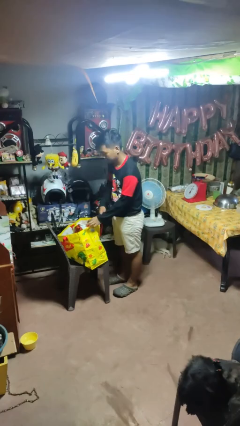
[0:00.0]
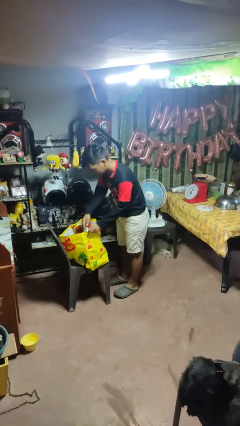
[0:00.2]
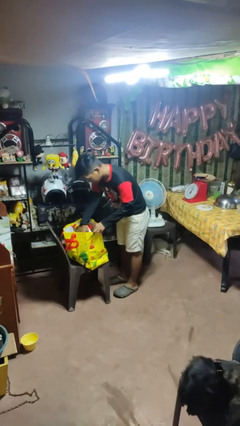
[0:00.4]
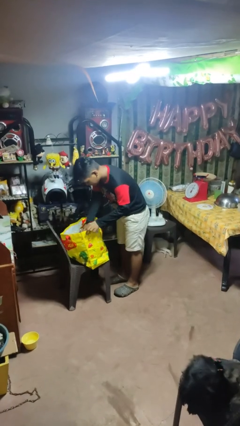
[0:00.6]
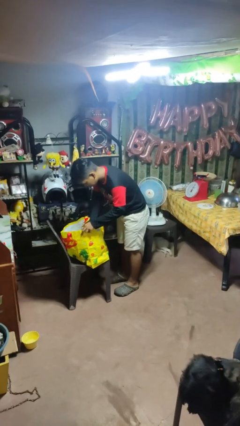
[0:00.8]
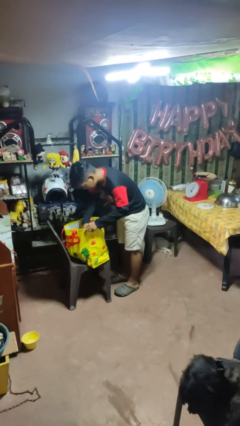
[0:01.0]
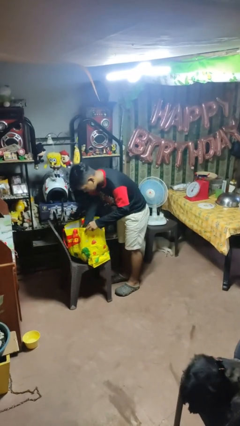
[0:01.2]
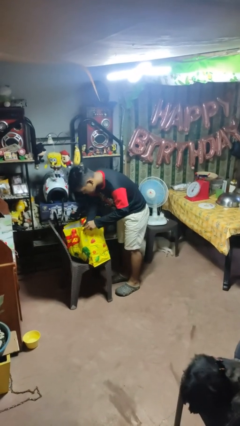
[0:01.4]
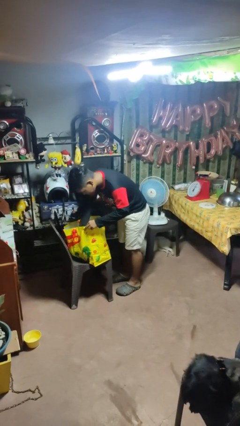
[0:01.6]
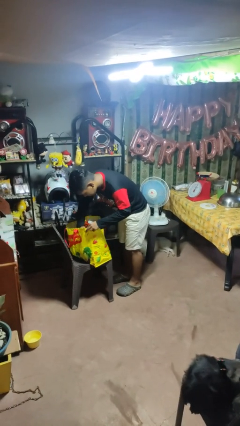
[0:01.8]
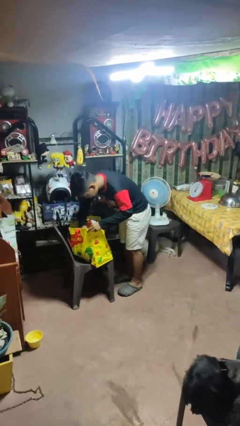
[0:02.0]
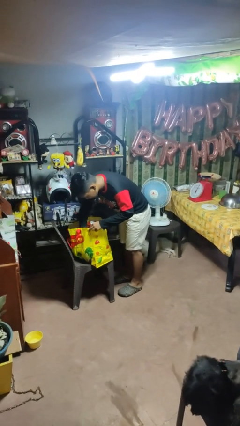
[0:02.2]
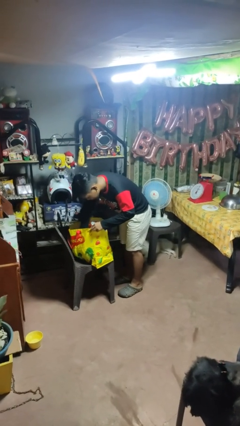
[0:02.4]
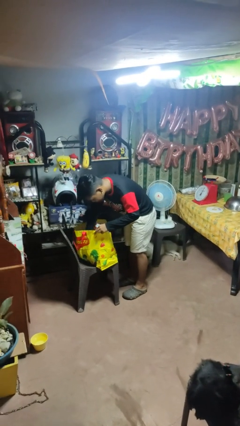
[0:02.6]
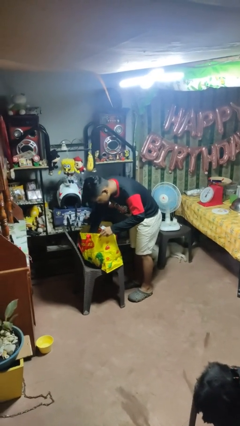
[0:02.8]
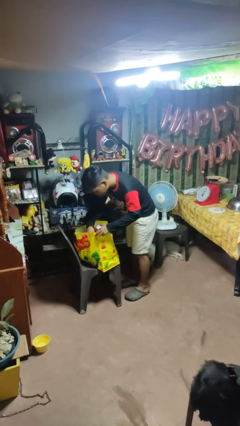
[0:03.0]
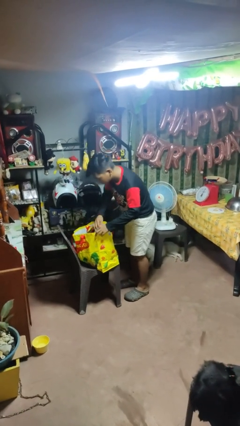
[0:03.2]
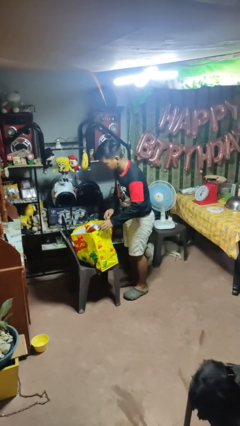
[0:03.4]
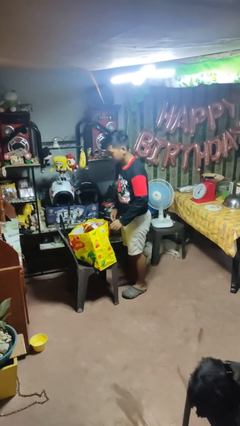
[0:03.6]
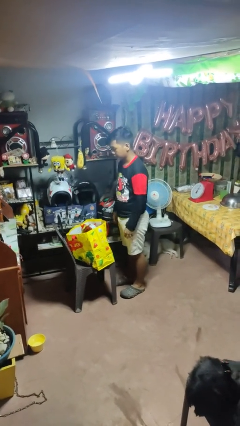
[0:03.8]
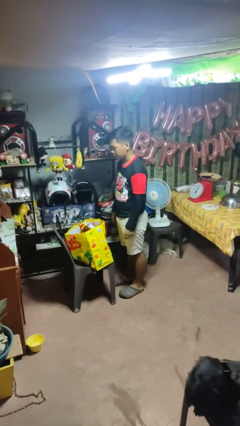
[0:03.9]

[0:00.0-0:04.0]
person searches in bag

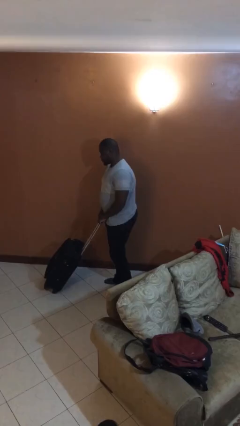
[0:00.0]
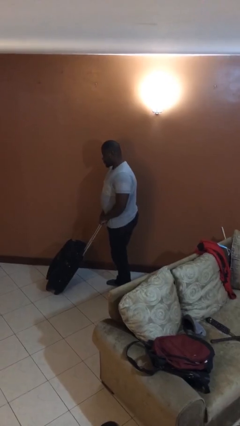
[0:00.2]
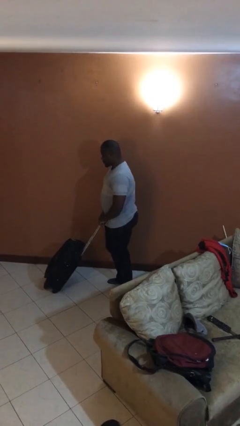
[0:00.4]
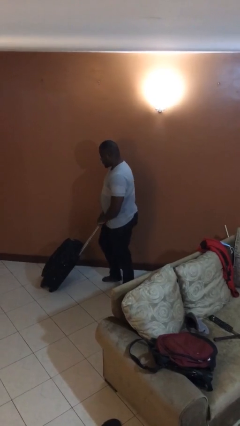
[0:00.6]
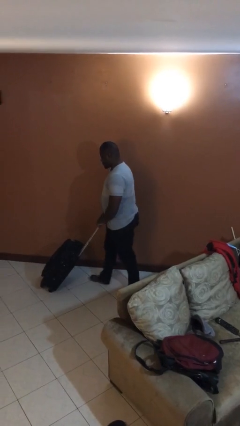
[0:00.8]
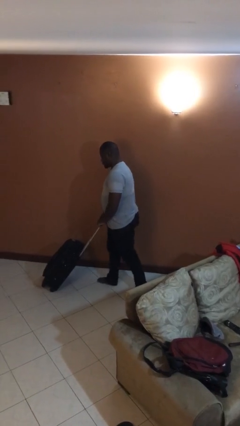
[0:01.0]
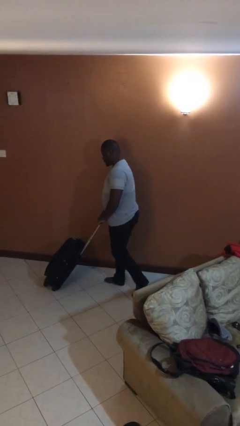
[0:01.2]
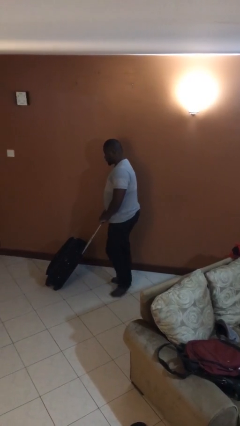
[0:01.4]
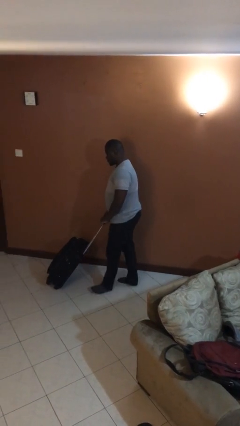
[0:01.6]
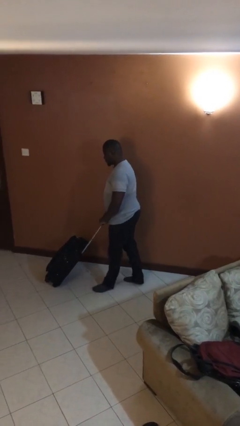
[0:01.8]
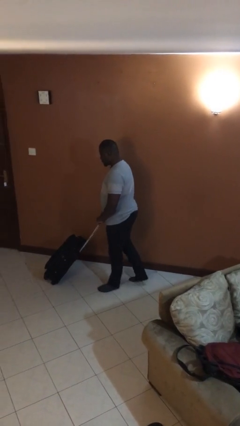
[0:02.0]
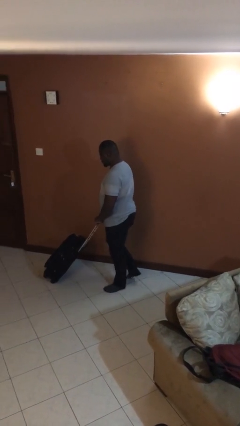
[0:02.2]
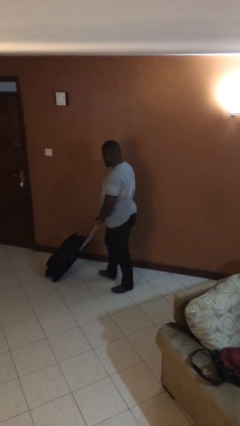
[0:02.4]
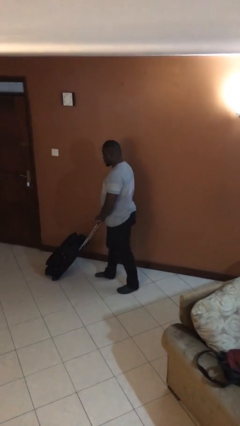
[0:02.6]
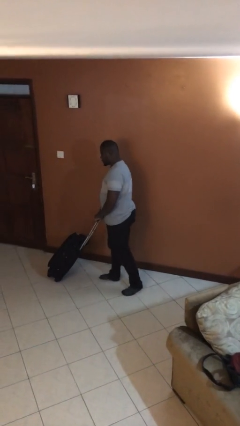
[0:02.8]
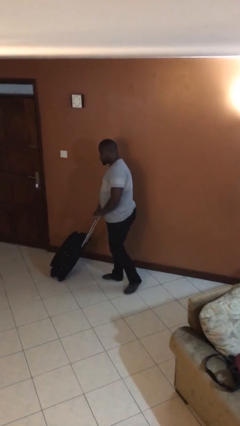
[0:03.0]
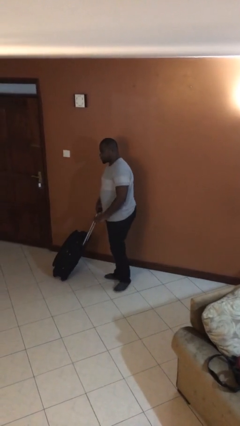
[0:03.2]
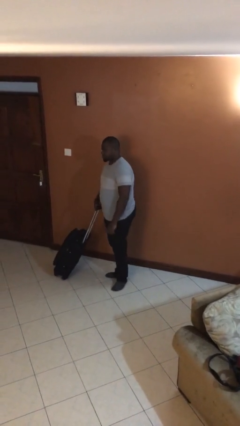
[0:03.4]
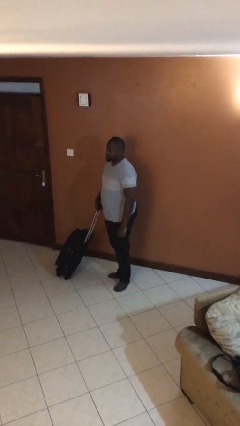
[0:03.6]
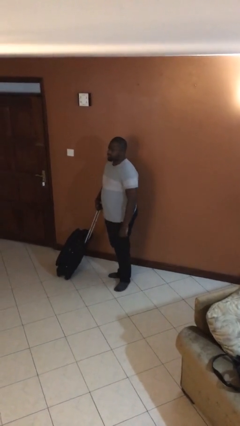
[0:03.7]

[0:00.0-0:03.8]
person pushes wheeled cart

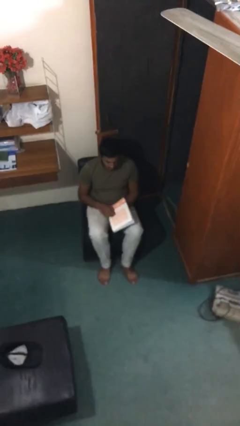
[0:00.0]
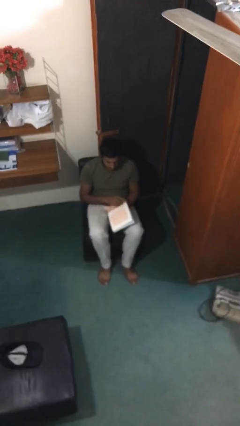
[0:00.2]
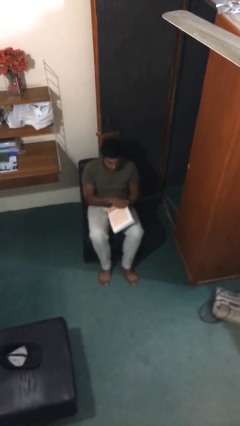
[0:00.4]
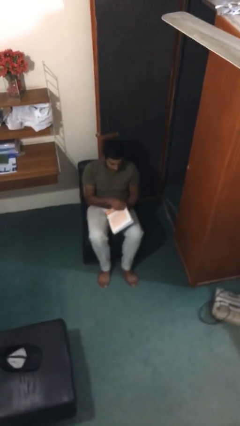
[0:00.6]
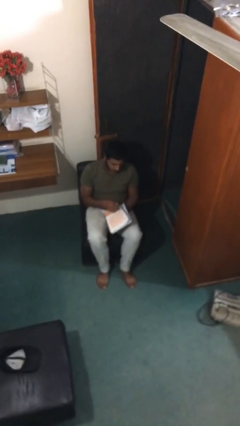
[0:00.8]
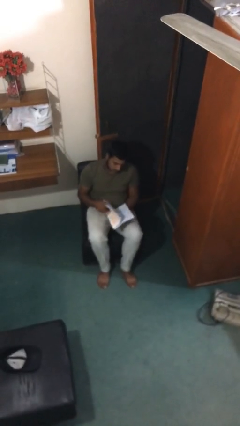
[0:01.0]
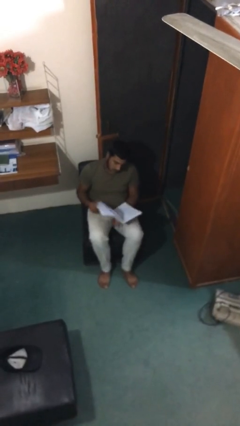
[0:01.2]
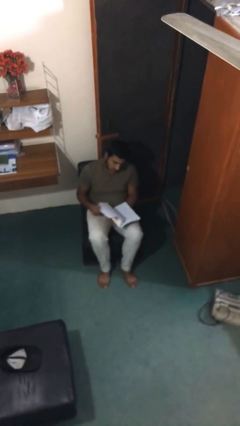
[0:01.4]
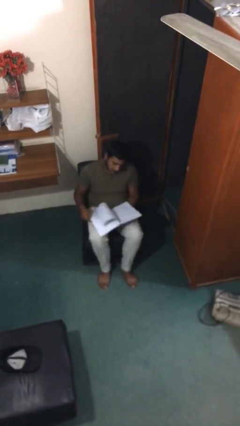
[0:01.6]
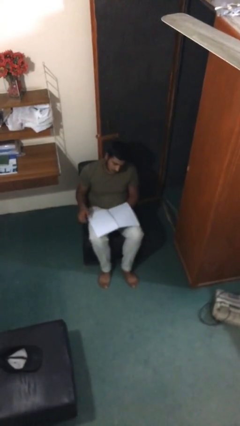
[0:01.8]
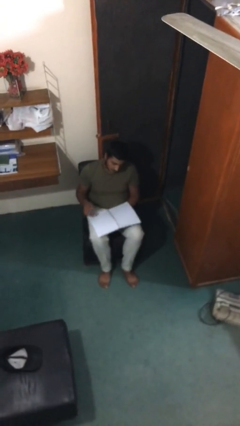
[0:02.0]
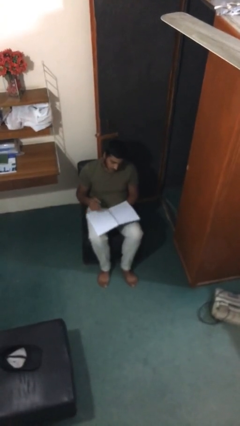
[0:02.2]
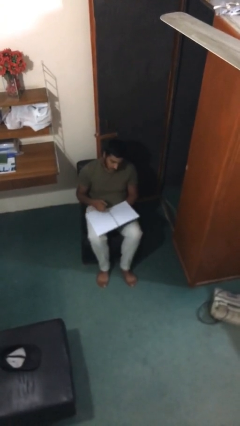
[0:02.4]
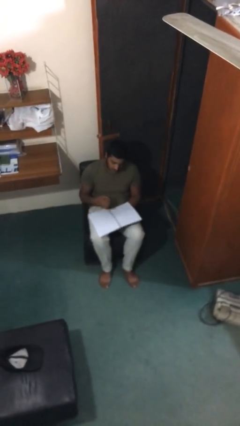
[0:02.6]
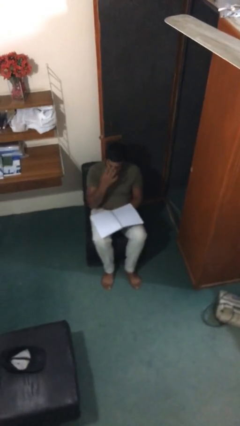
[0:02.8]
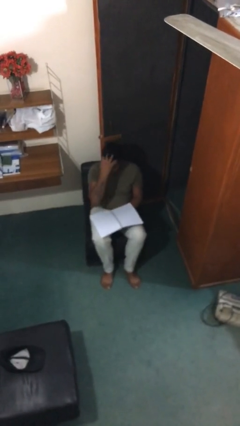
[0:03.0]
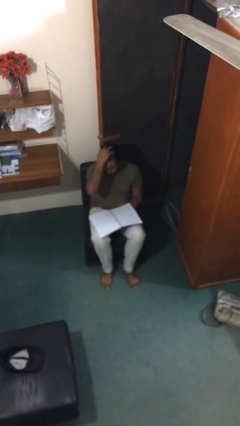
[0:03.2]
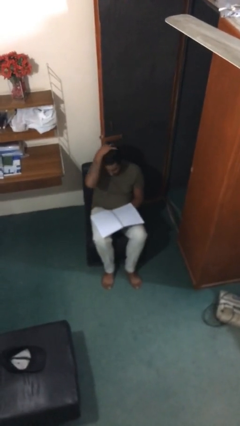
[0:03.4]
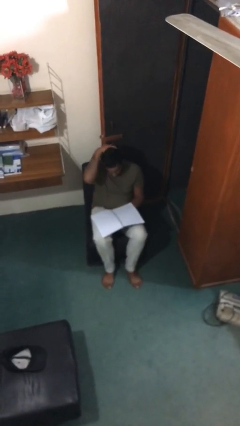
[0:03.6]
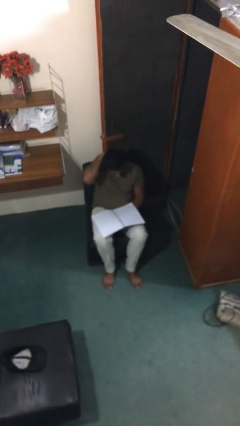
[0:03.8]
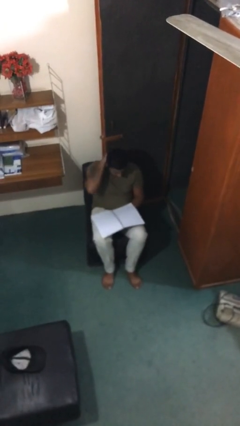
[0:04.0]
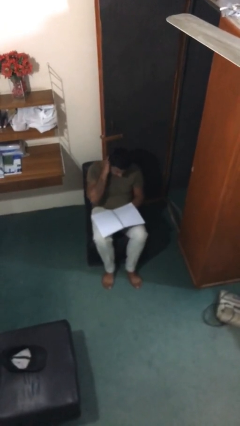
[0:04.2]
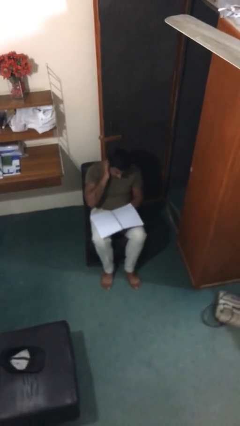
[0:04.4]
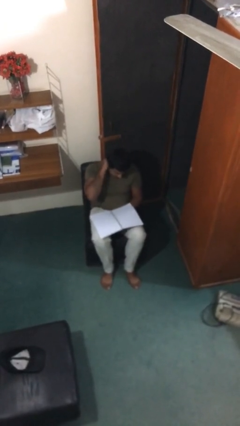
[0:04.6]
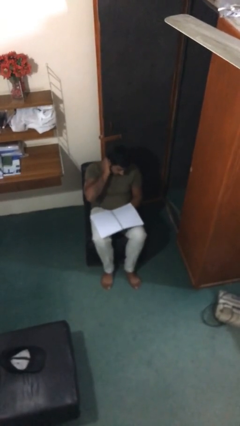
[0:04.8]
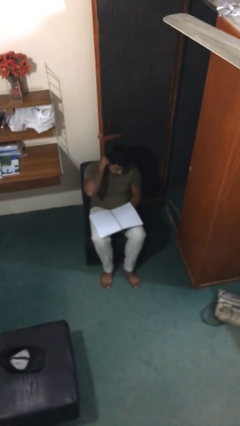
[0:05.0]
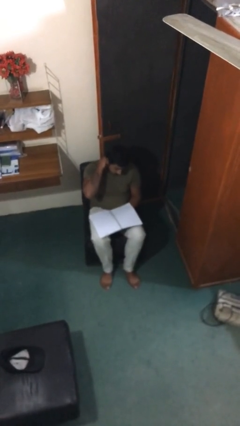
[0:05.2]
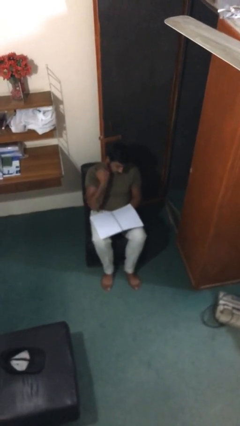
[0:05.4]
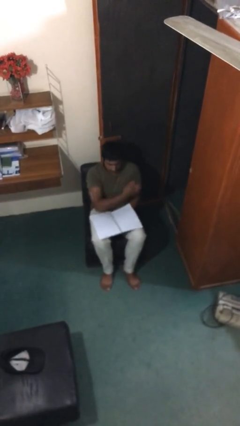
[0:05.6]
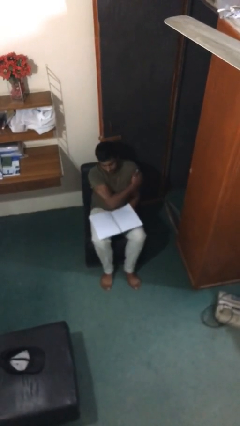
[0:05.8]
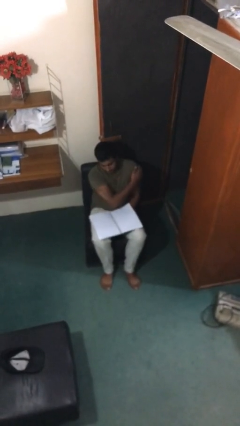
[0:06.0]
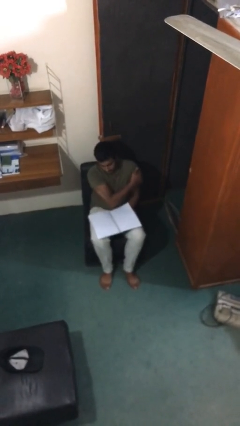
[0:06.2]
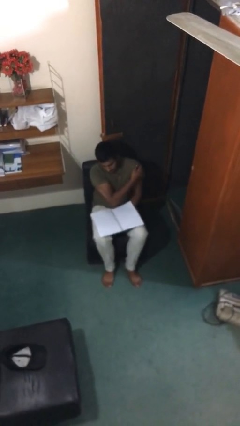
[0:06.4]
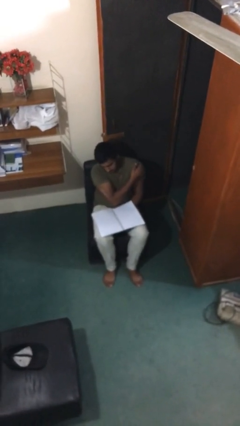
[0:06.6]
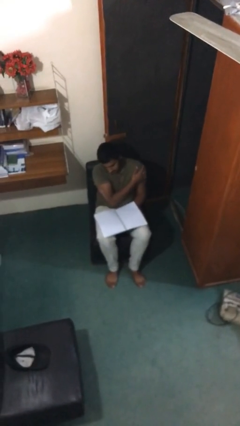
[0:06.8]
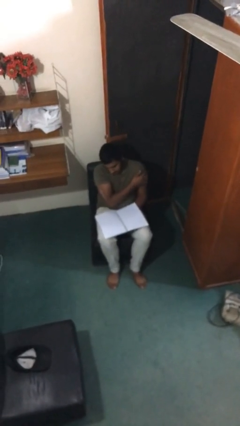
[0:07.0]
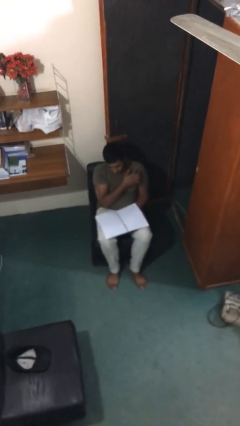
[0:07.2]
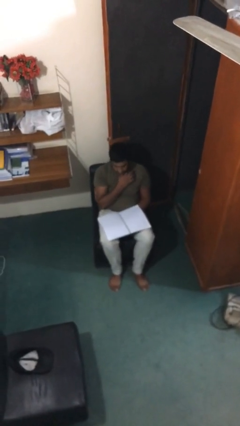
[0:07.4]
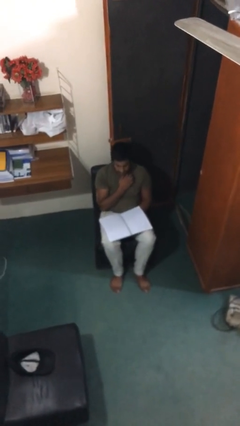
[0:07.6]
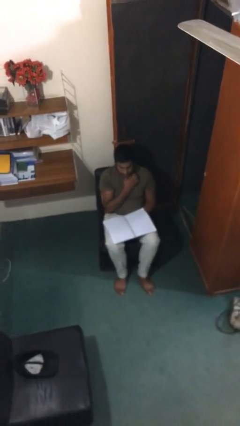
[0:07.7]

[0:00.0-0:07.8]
person reads document

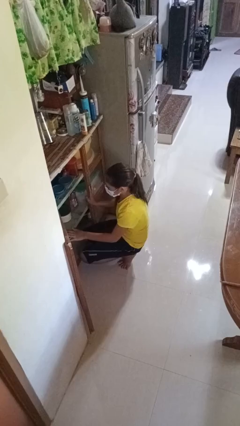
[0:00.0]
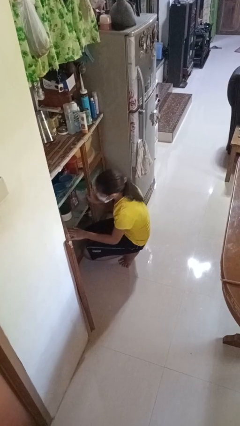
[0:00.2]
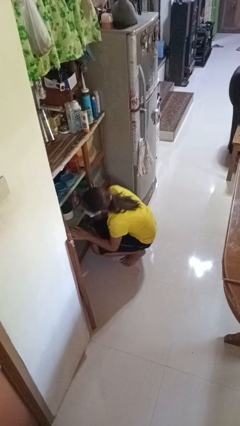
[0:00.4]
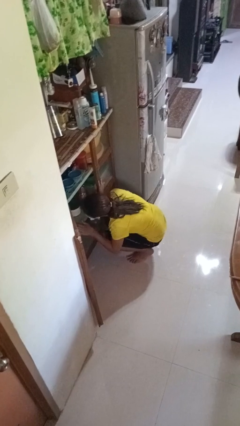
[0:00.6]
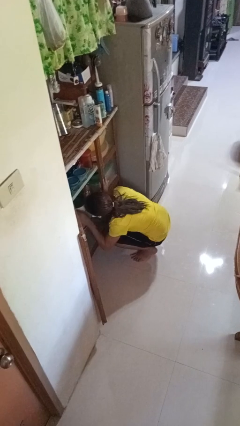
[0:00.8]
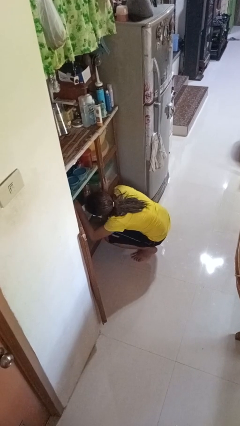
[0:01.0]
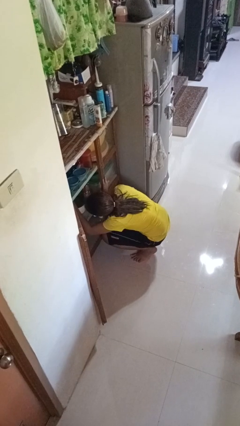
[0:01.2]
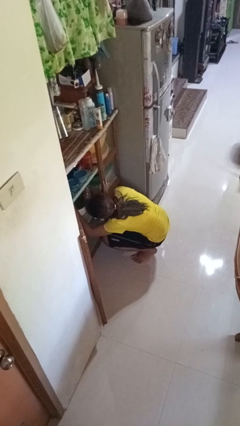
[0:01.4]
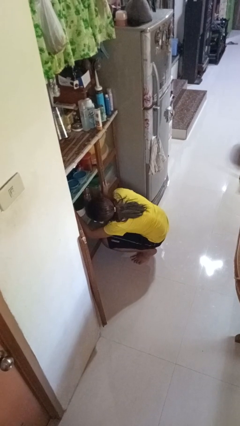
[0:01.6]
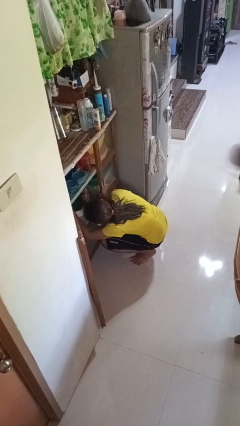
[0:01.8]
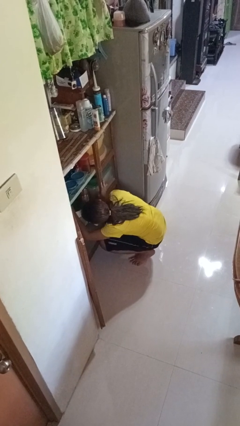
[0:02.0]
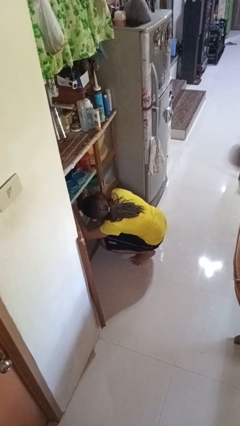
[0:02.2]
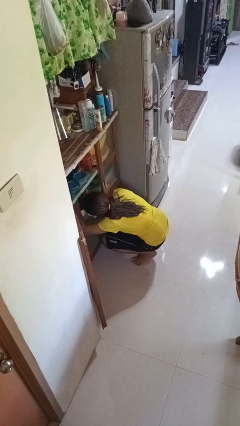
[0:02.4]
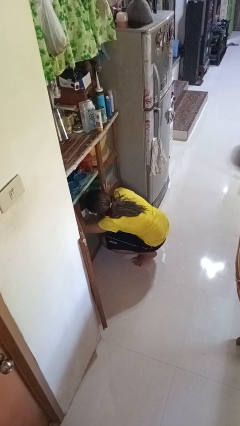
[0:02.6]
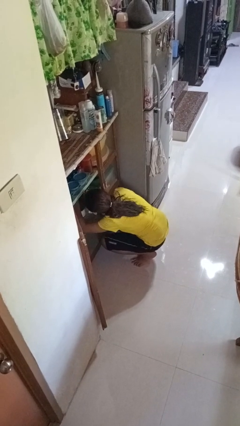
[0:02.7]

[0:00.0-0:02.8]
person searches in cabinet
